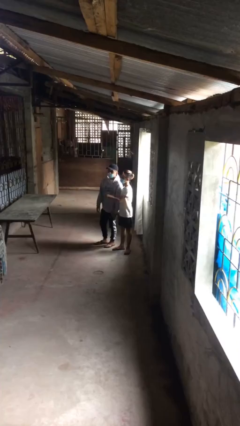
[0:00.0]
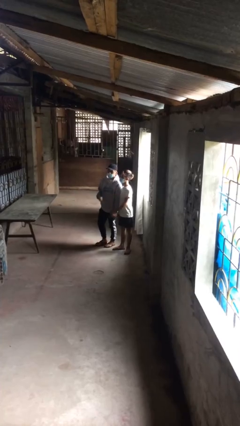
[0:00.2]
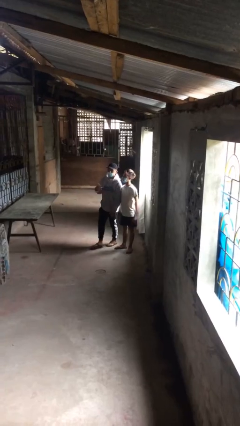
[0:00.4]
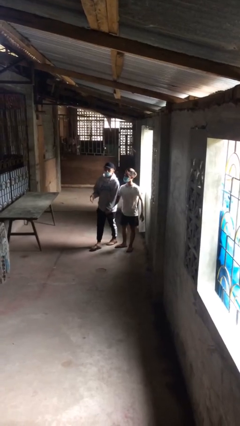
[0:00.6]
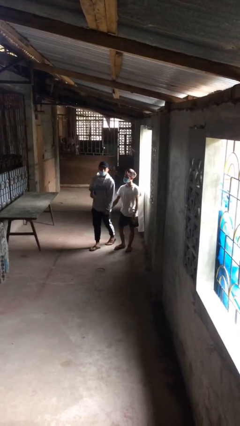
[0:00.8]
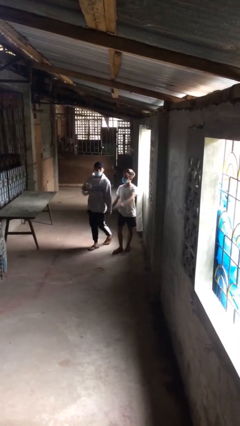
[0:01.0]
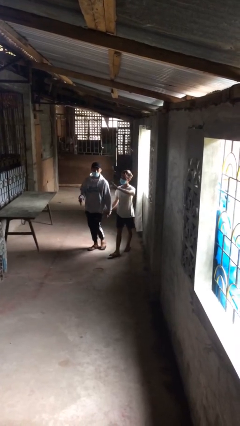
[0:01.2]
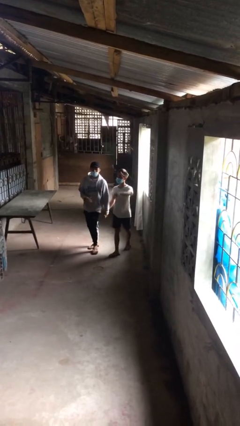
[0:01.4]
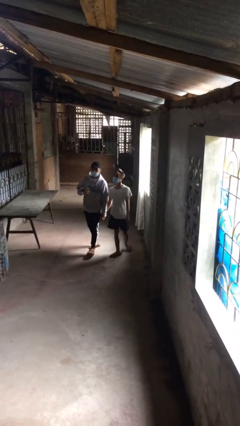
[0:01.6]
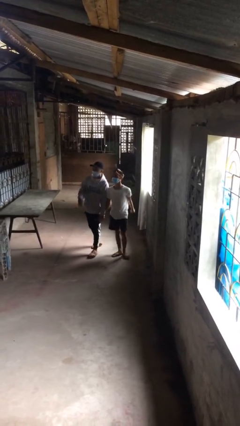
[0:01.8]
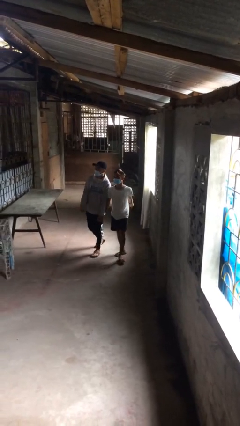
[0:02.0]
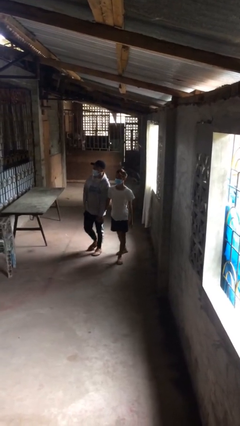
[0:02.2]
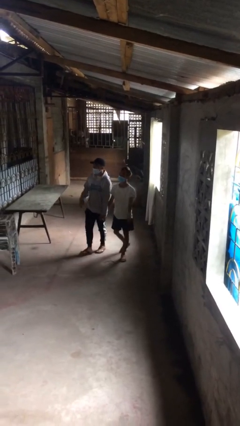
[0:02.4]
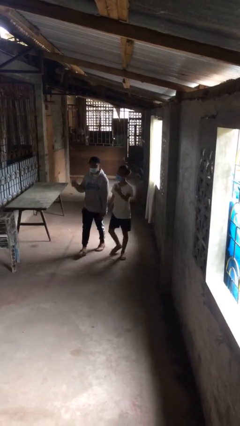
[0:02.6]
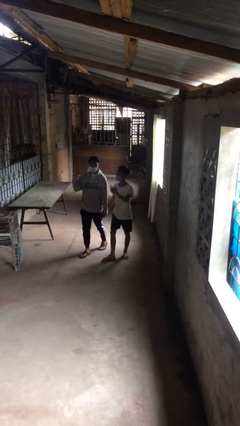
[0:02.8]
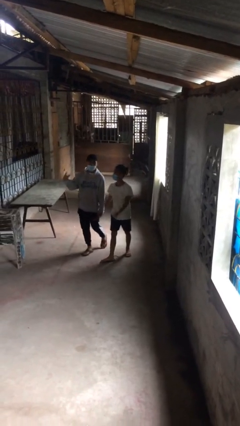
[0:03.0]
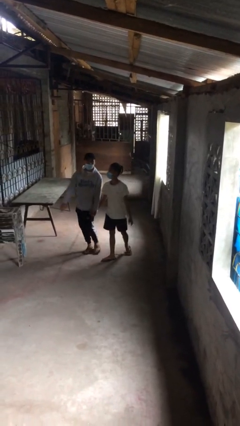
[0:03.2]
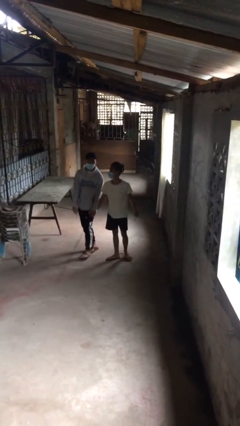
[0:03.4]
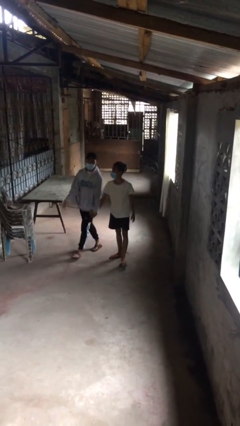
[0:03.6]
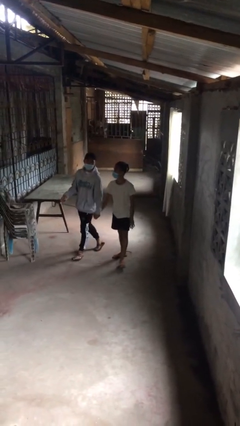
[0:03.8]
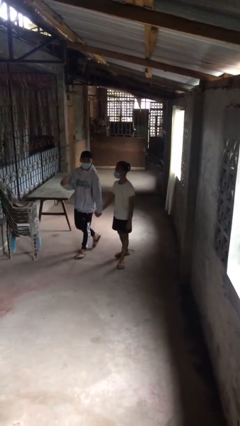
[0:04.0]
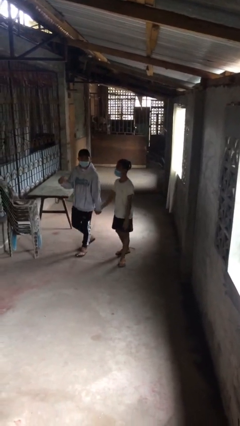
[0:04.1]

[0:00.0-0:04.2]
person holds hand

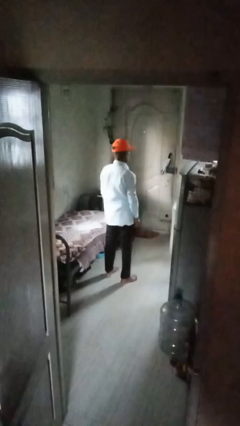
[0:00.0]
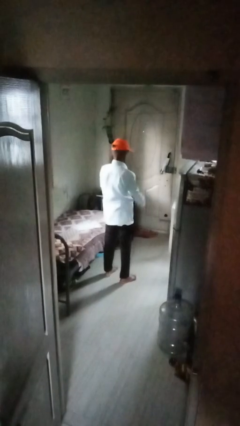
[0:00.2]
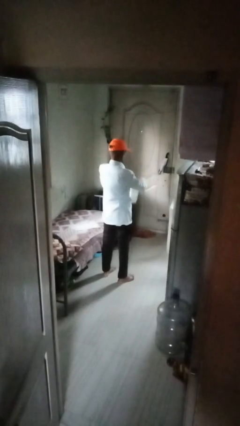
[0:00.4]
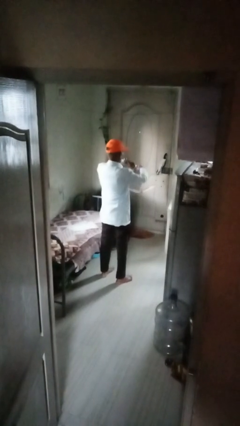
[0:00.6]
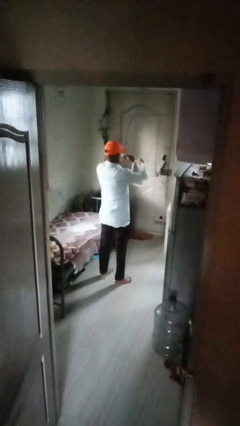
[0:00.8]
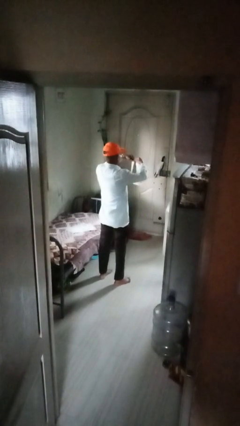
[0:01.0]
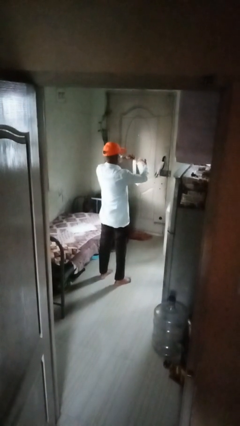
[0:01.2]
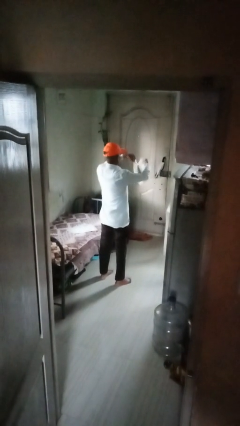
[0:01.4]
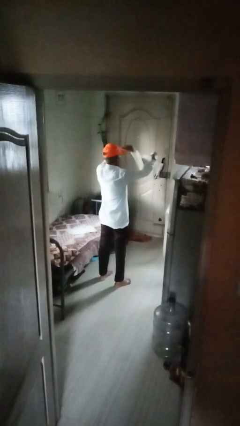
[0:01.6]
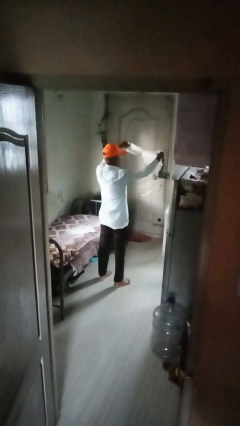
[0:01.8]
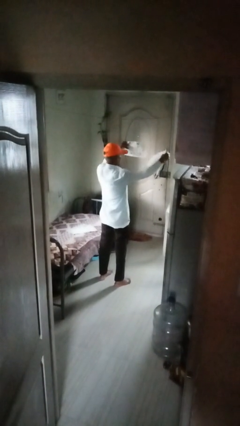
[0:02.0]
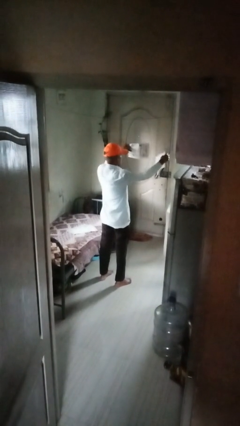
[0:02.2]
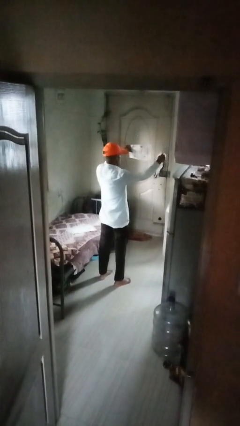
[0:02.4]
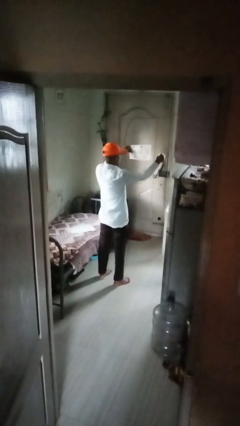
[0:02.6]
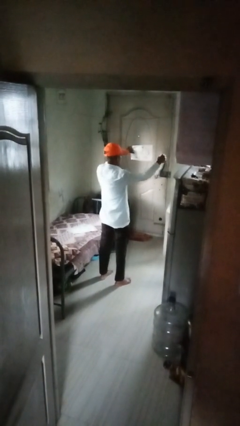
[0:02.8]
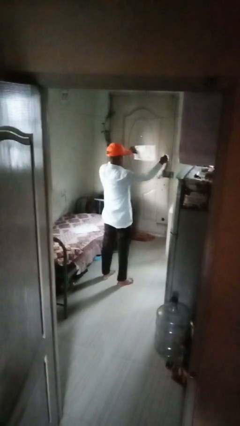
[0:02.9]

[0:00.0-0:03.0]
person tears paper

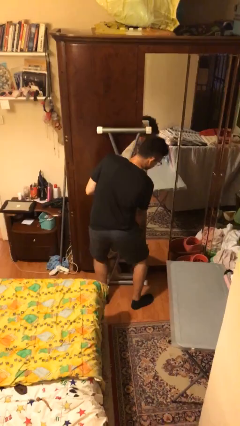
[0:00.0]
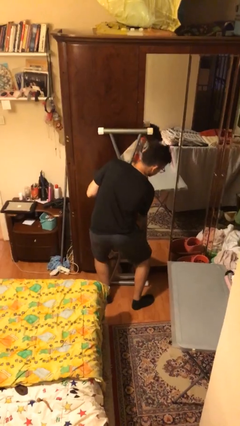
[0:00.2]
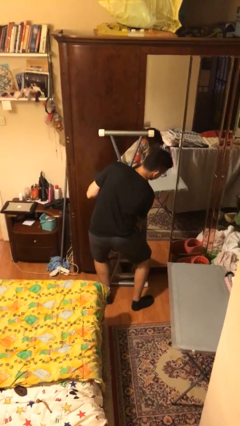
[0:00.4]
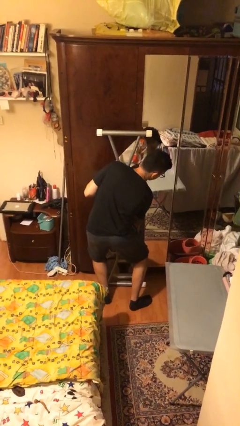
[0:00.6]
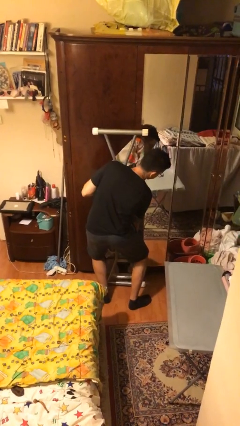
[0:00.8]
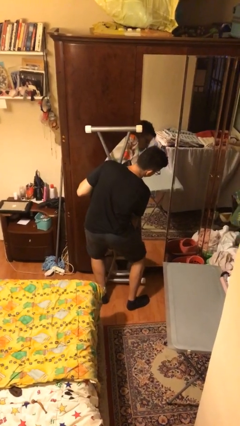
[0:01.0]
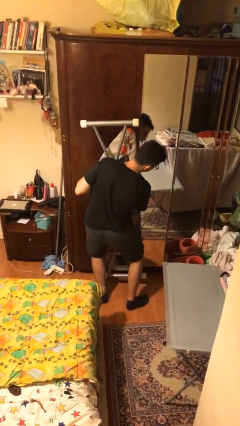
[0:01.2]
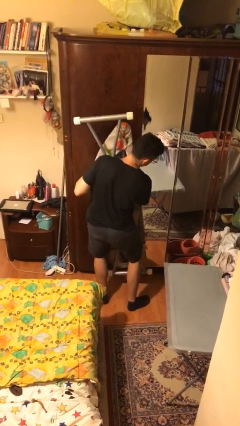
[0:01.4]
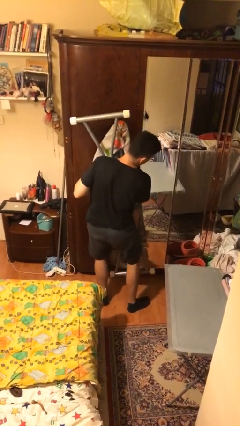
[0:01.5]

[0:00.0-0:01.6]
person picks up object from floor

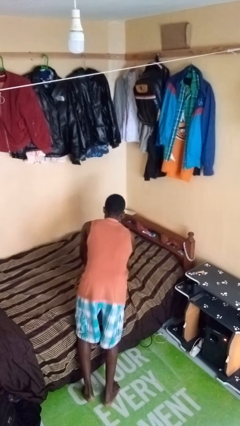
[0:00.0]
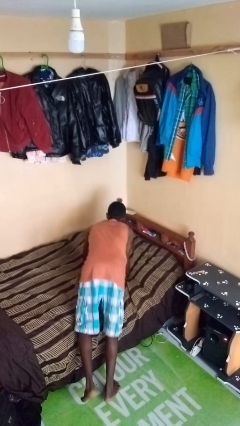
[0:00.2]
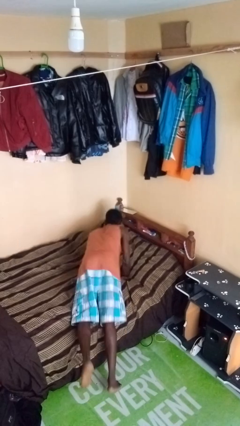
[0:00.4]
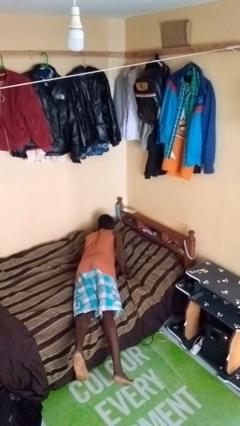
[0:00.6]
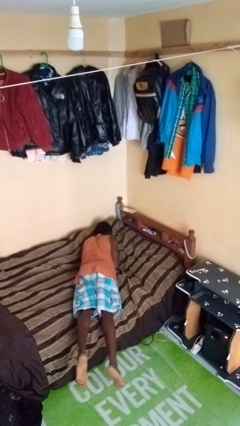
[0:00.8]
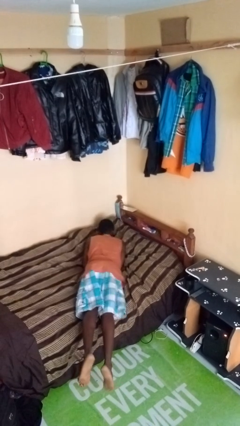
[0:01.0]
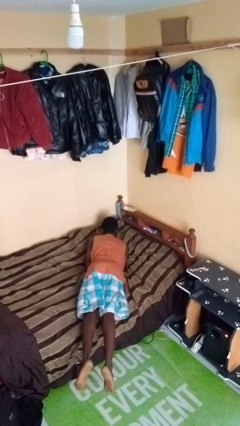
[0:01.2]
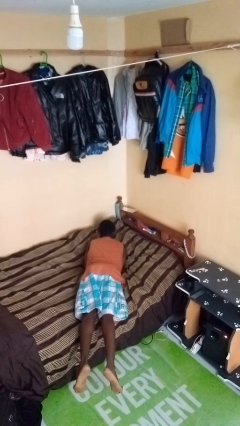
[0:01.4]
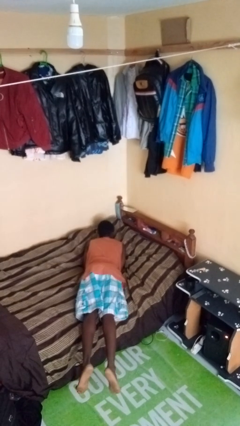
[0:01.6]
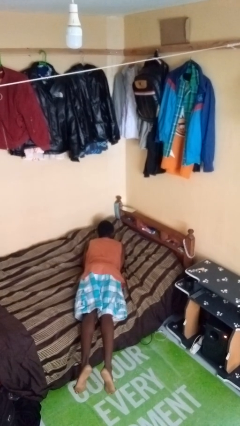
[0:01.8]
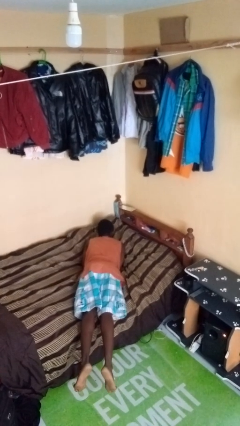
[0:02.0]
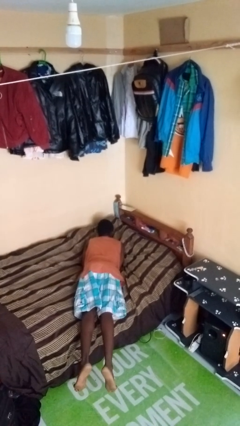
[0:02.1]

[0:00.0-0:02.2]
person lies down on bed

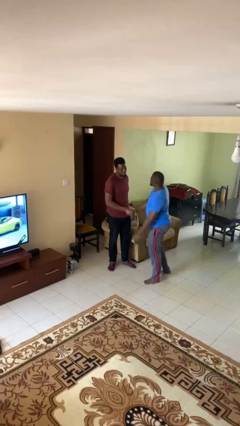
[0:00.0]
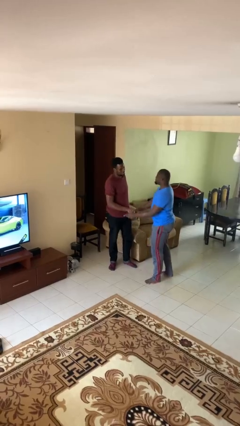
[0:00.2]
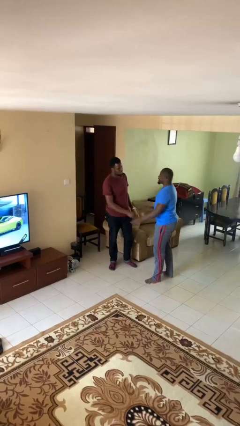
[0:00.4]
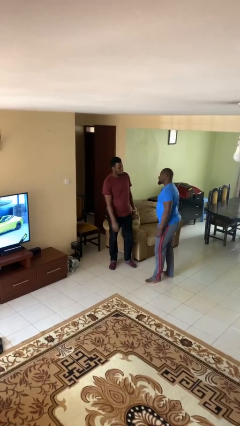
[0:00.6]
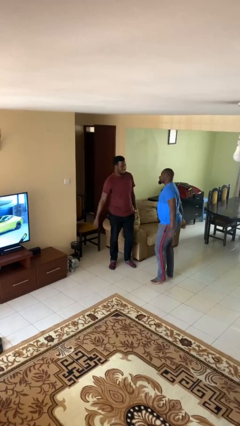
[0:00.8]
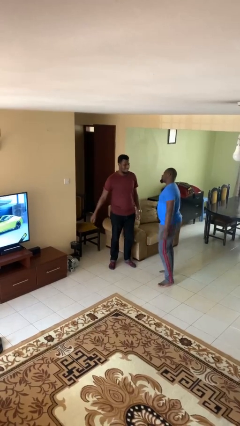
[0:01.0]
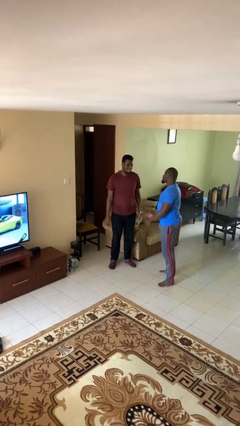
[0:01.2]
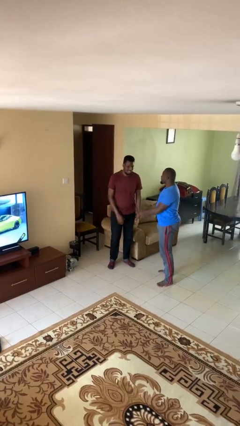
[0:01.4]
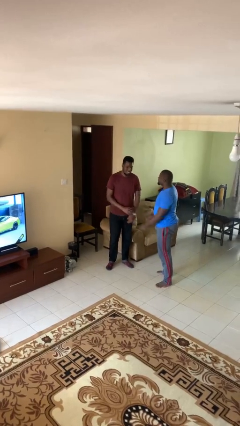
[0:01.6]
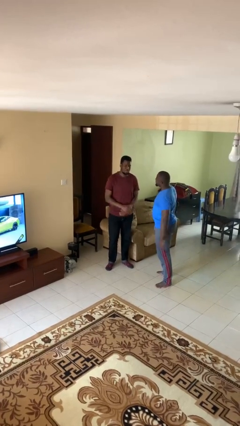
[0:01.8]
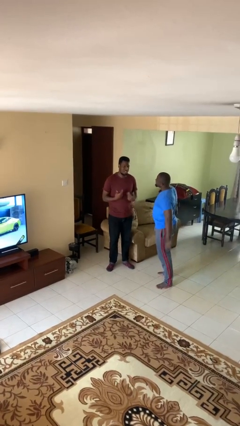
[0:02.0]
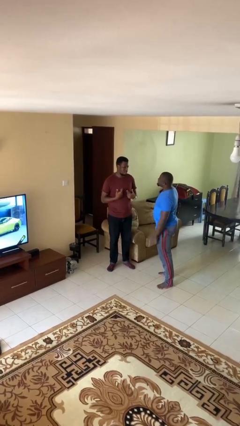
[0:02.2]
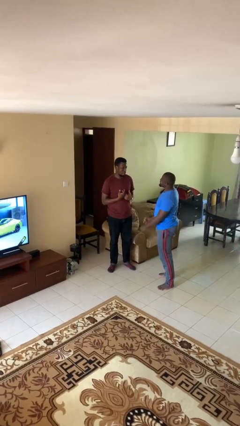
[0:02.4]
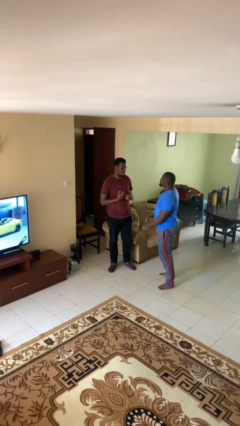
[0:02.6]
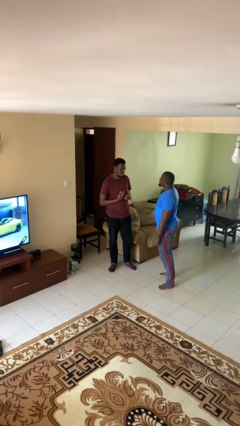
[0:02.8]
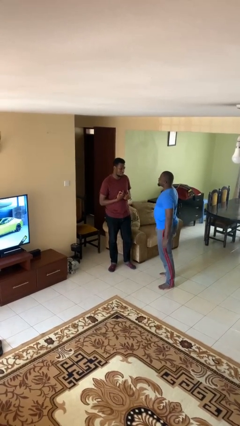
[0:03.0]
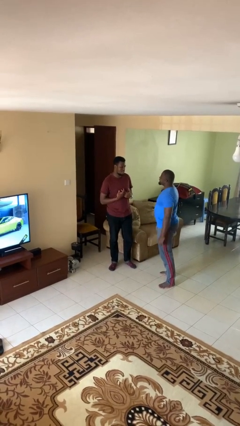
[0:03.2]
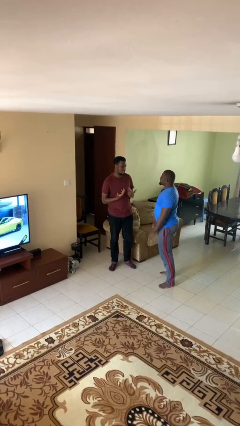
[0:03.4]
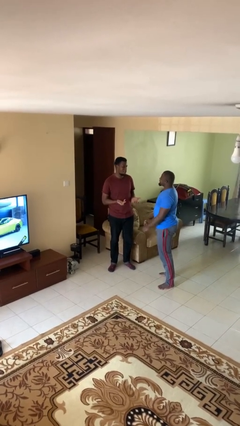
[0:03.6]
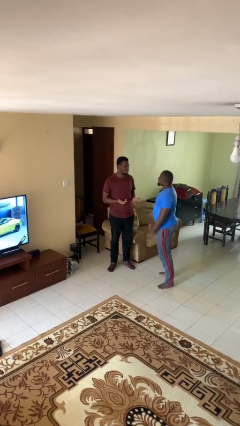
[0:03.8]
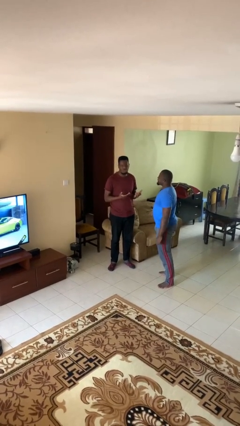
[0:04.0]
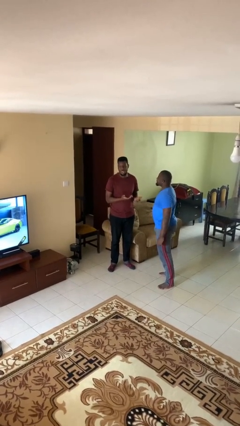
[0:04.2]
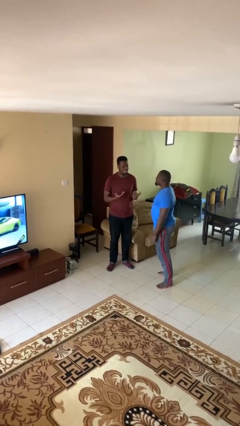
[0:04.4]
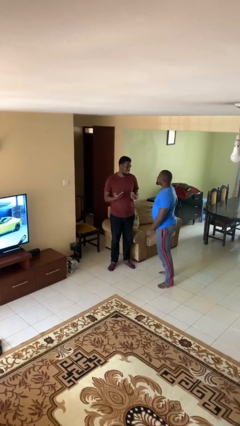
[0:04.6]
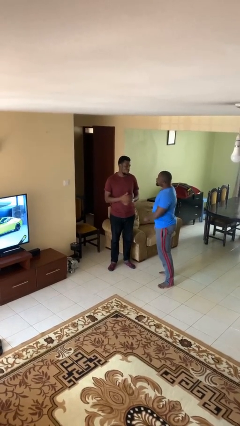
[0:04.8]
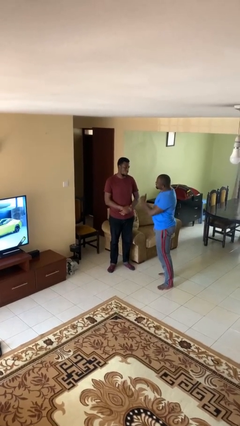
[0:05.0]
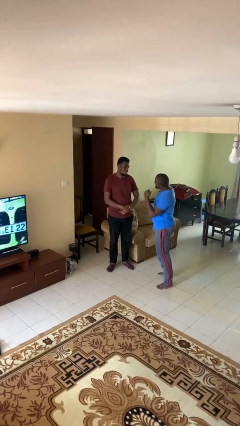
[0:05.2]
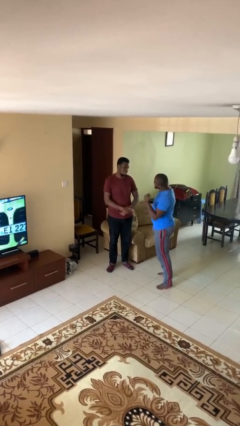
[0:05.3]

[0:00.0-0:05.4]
person talks to person

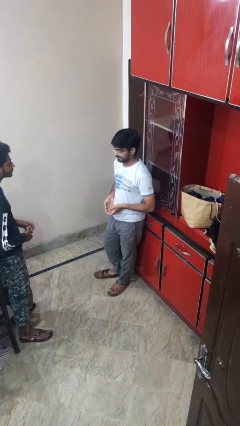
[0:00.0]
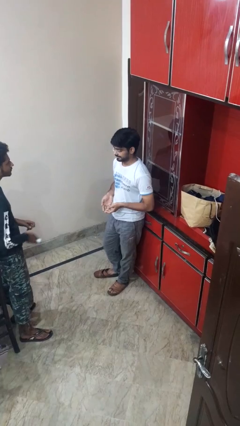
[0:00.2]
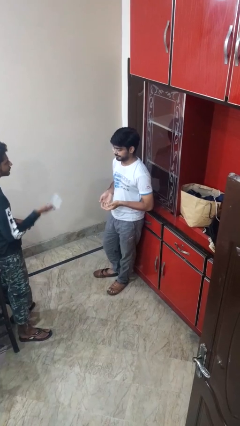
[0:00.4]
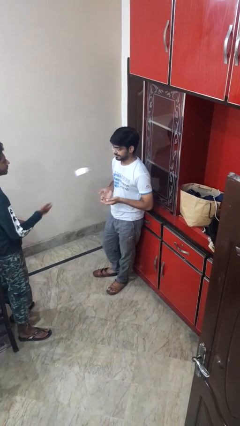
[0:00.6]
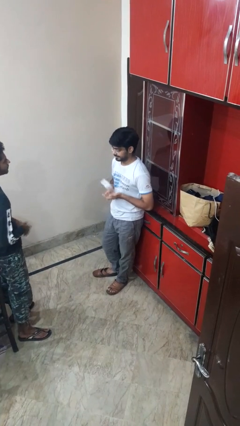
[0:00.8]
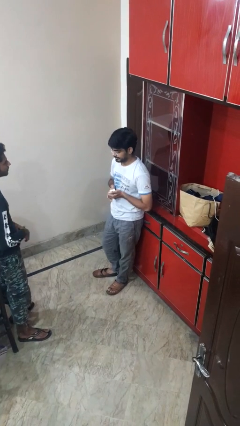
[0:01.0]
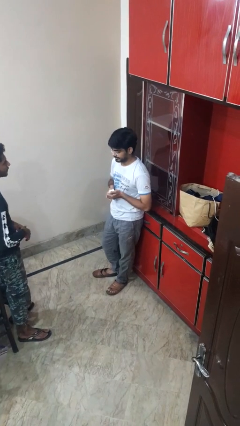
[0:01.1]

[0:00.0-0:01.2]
person catches object from person

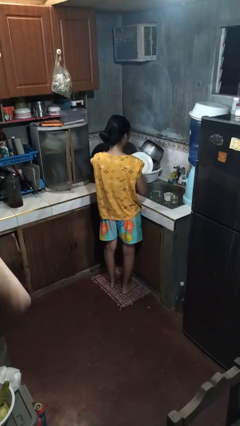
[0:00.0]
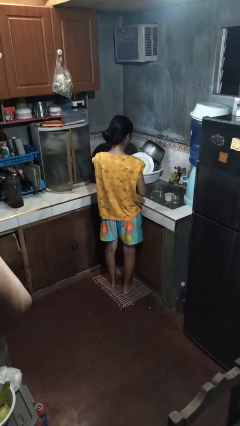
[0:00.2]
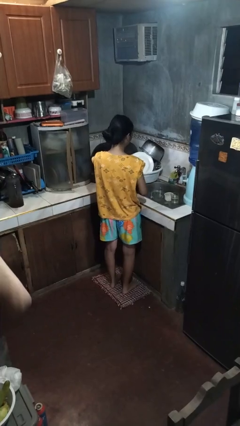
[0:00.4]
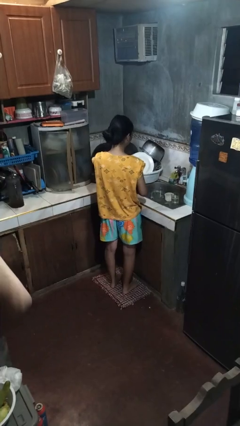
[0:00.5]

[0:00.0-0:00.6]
person turns on faucet
